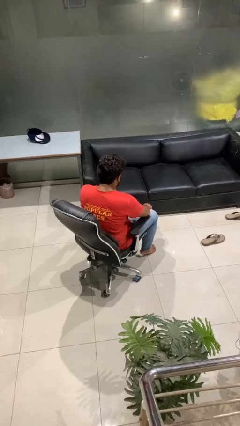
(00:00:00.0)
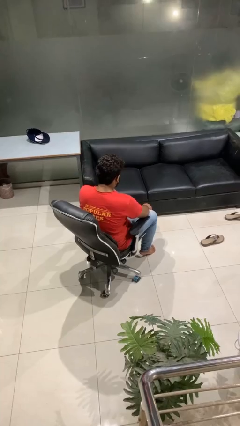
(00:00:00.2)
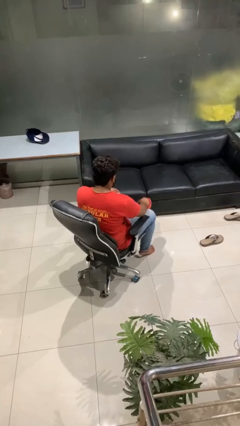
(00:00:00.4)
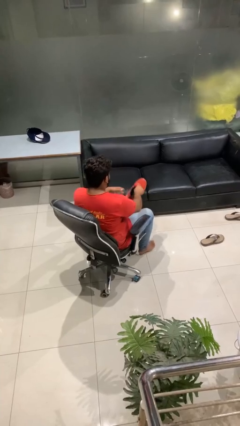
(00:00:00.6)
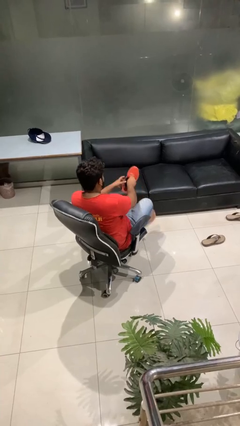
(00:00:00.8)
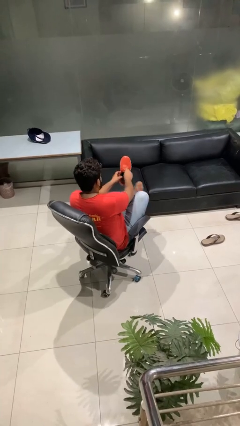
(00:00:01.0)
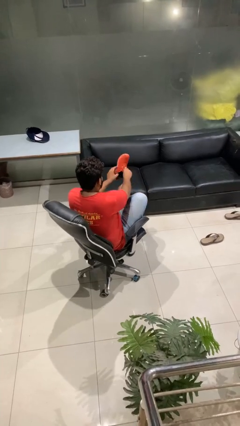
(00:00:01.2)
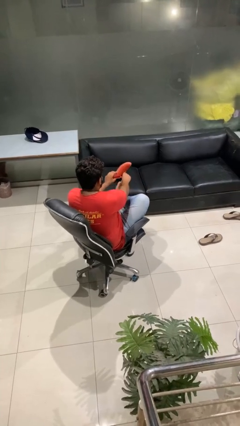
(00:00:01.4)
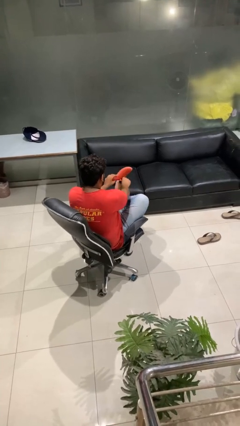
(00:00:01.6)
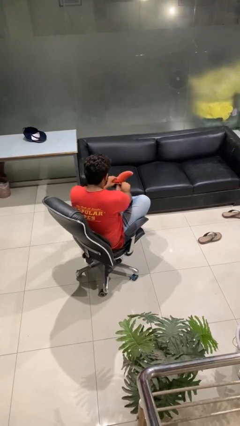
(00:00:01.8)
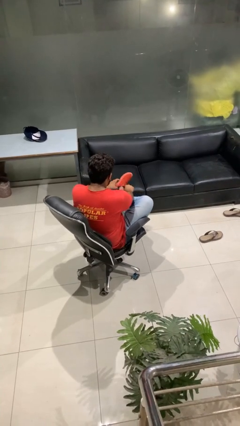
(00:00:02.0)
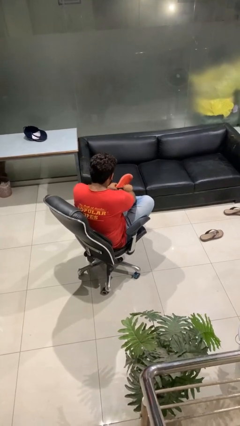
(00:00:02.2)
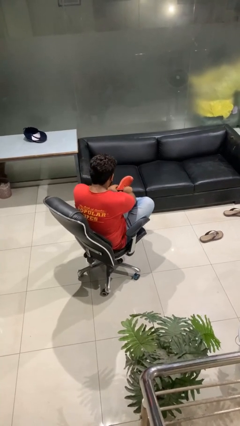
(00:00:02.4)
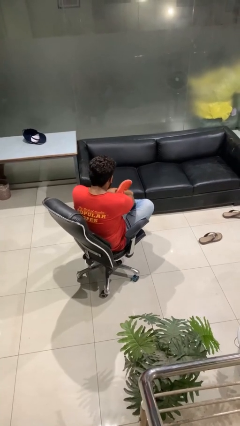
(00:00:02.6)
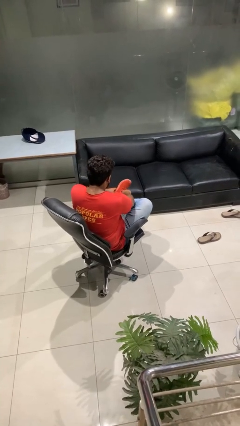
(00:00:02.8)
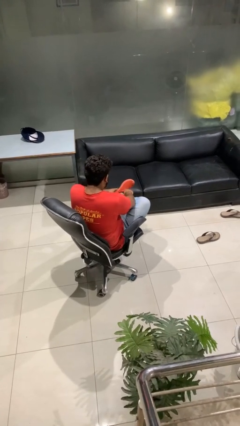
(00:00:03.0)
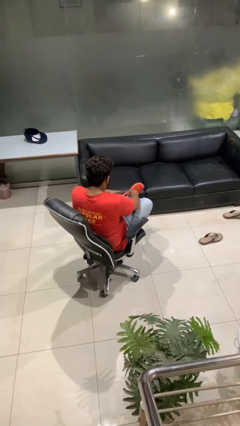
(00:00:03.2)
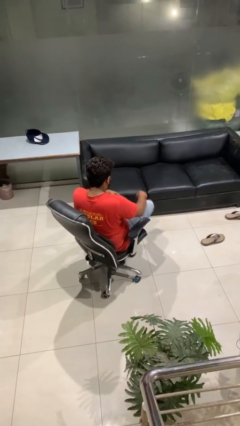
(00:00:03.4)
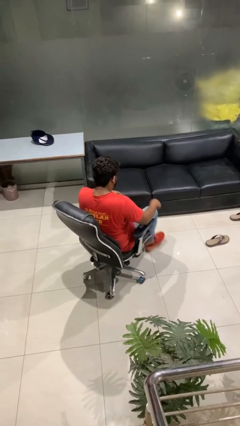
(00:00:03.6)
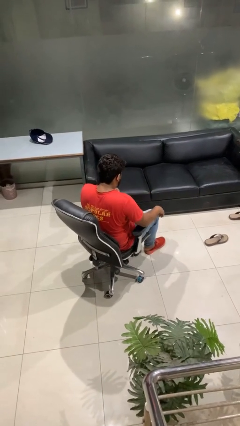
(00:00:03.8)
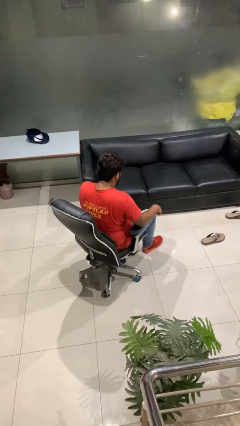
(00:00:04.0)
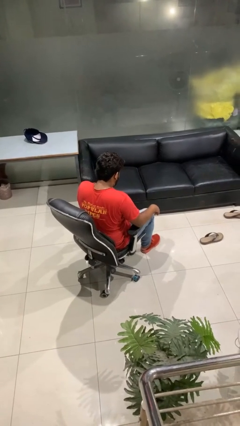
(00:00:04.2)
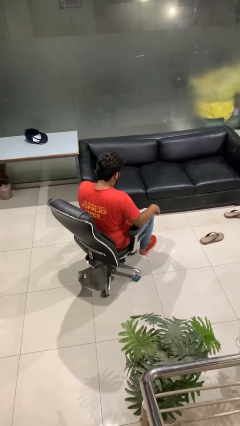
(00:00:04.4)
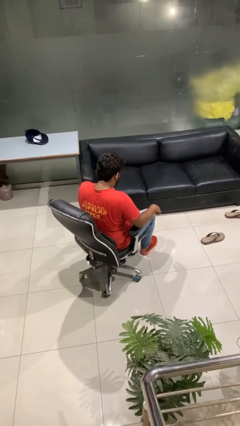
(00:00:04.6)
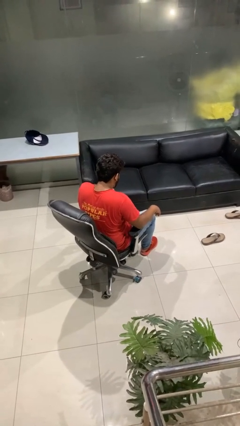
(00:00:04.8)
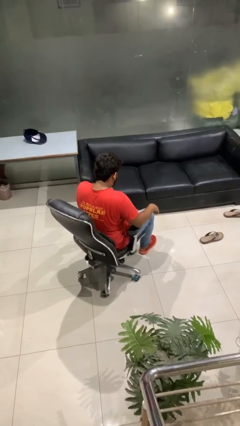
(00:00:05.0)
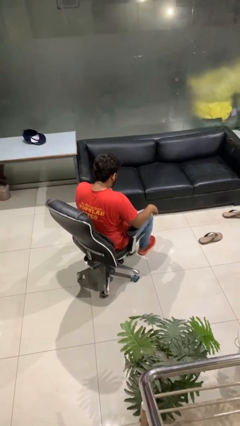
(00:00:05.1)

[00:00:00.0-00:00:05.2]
person puts on shoes

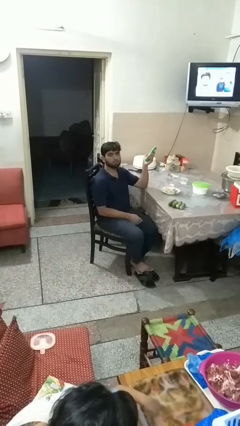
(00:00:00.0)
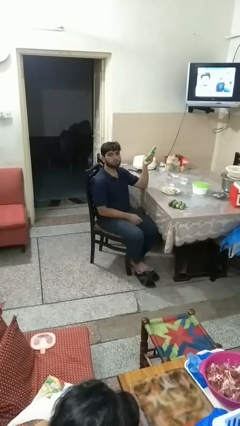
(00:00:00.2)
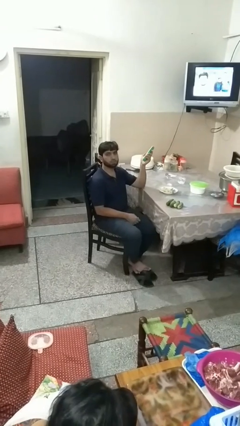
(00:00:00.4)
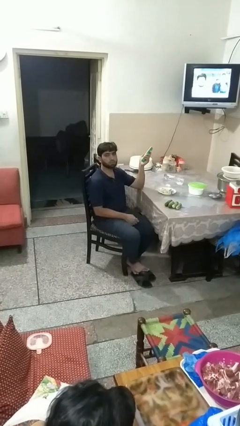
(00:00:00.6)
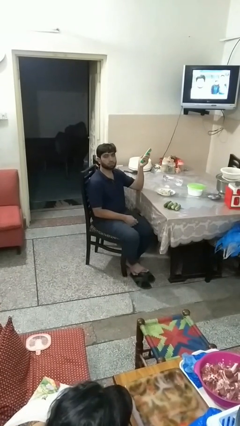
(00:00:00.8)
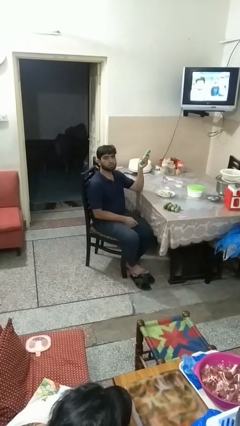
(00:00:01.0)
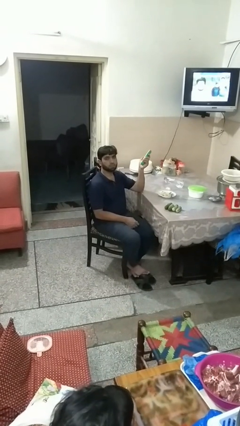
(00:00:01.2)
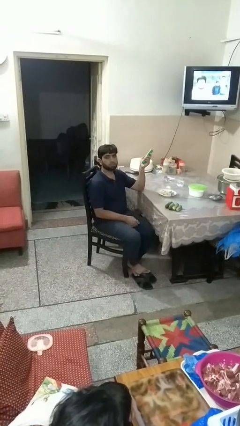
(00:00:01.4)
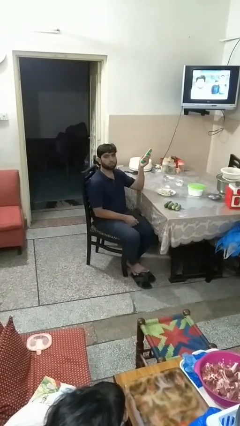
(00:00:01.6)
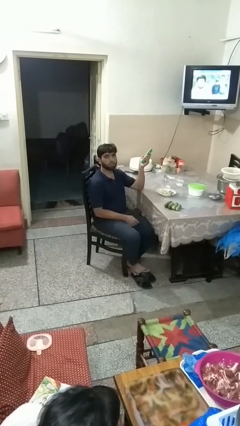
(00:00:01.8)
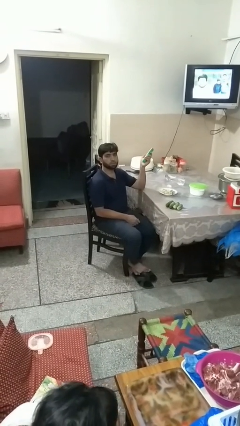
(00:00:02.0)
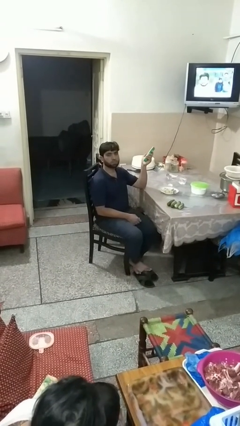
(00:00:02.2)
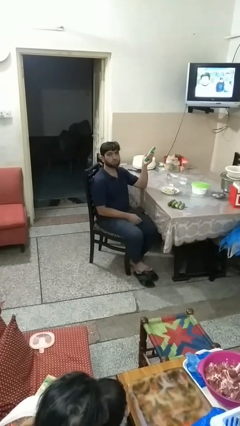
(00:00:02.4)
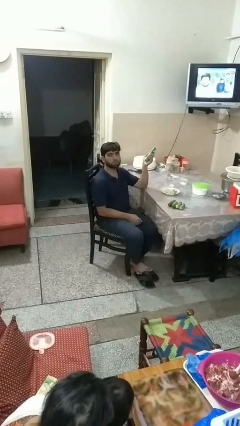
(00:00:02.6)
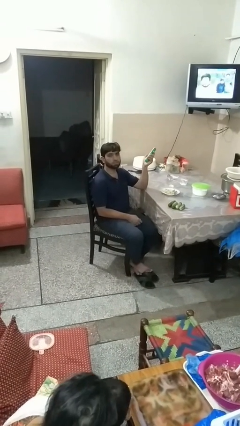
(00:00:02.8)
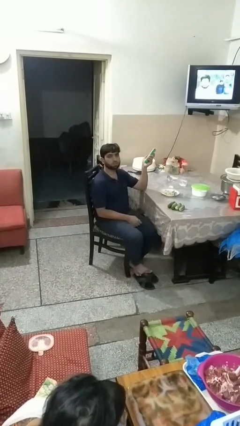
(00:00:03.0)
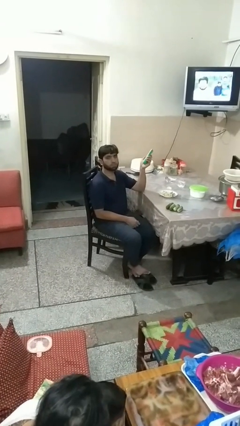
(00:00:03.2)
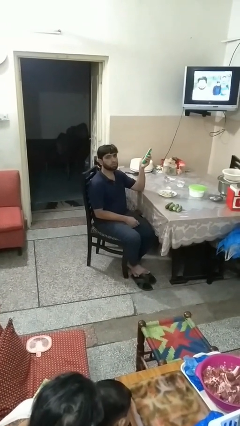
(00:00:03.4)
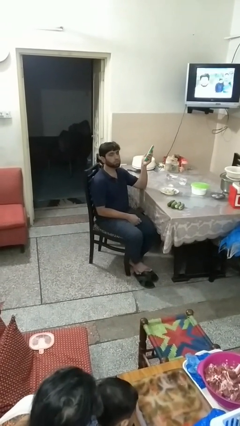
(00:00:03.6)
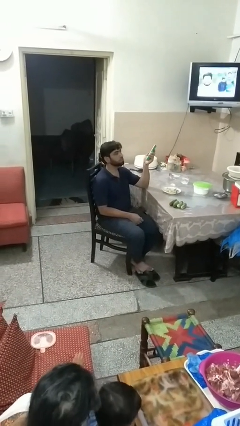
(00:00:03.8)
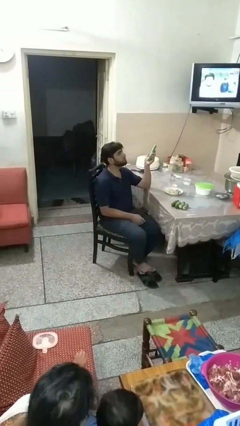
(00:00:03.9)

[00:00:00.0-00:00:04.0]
person uses television remote

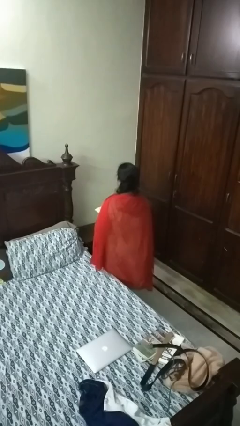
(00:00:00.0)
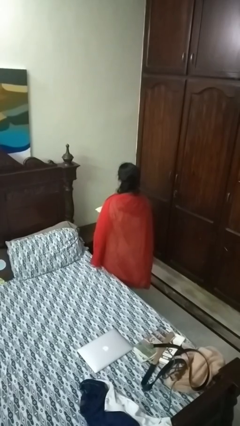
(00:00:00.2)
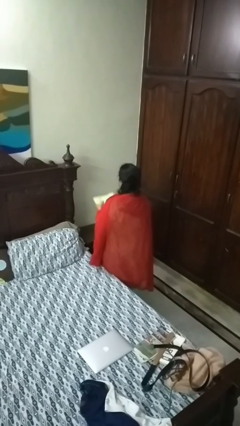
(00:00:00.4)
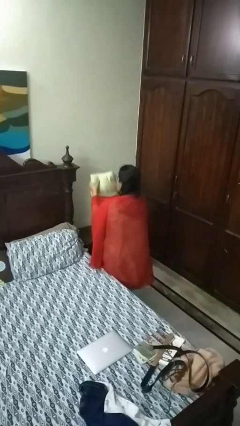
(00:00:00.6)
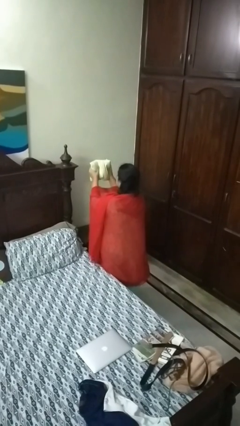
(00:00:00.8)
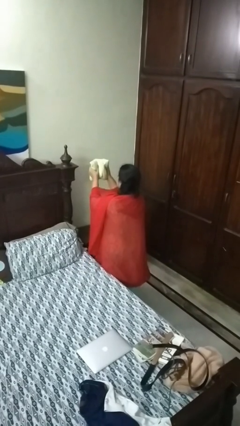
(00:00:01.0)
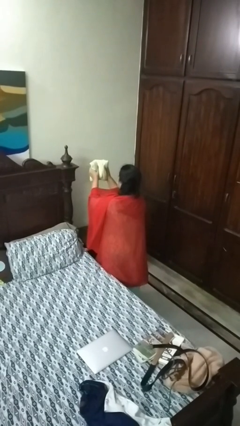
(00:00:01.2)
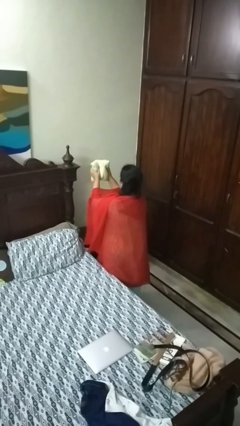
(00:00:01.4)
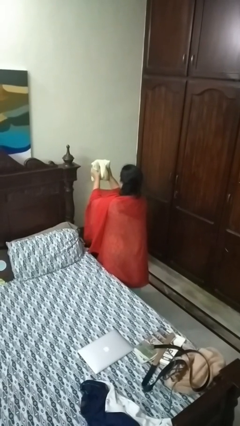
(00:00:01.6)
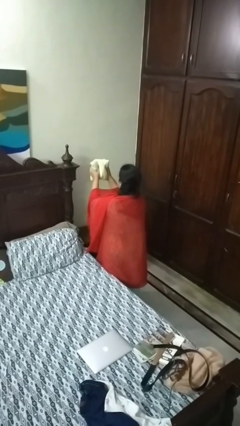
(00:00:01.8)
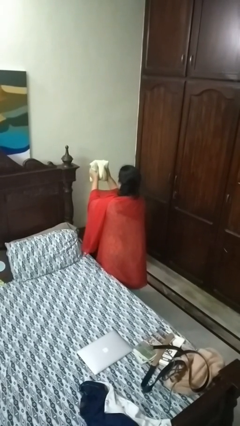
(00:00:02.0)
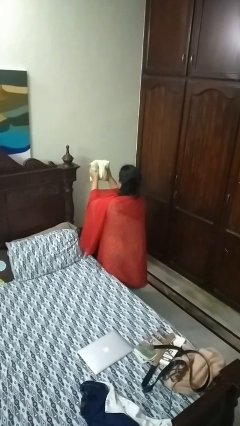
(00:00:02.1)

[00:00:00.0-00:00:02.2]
person squeezes object

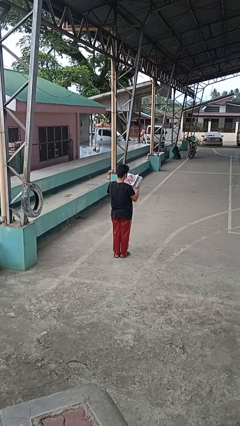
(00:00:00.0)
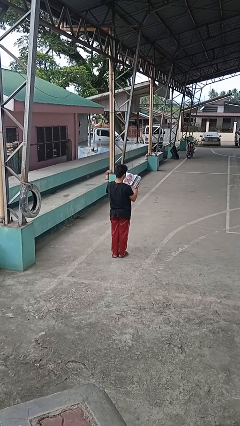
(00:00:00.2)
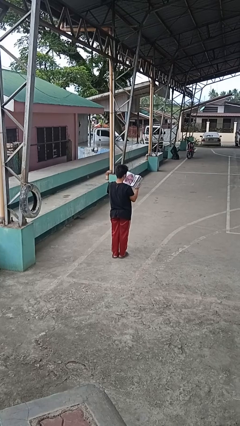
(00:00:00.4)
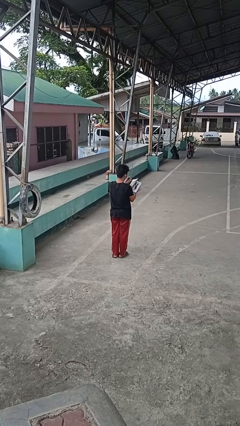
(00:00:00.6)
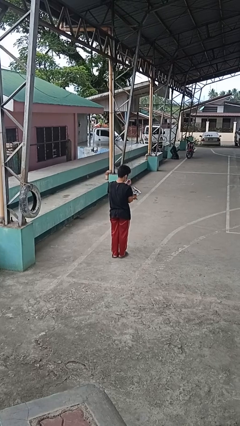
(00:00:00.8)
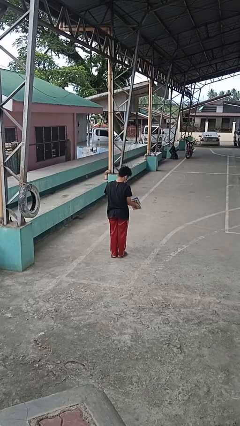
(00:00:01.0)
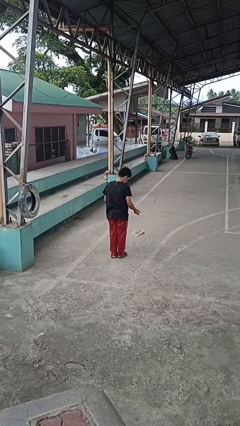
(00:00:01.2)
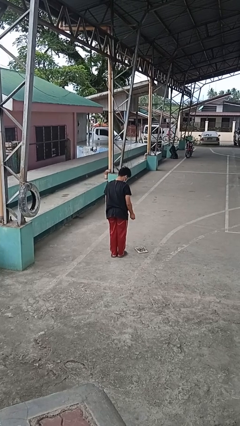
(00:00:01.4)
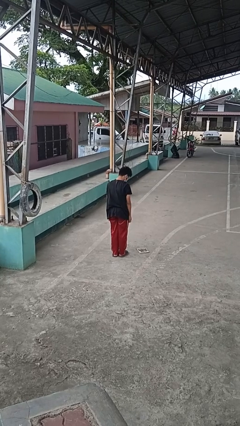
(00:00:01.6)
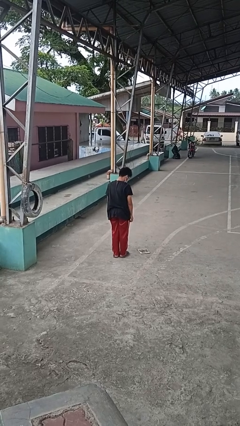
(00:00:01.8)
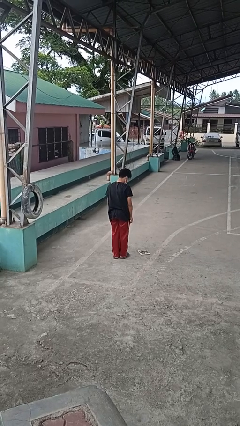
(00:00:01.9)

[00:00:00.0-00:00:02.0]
person drops object

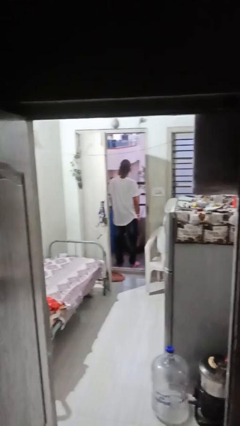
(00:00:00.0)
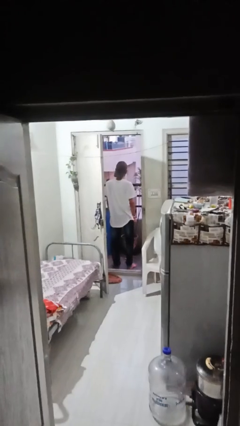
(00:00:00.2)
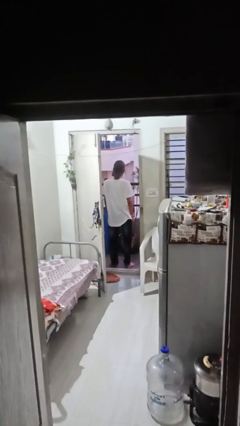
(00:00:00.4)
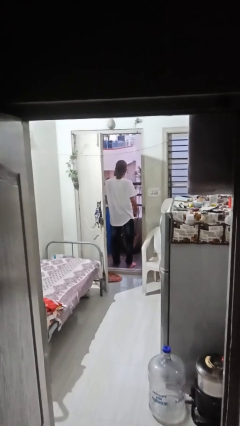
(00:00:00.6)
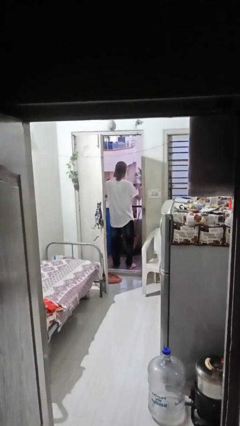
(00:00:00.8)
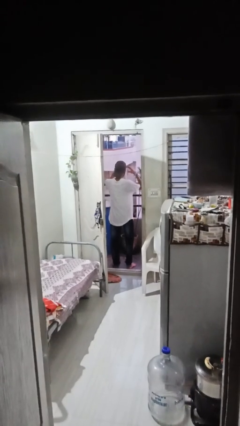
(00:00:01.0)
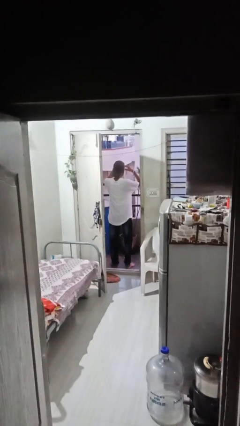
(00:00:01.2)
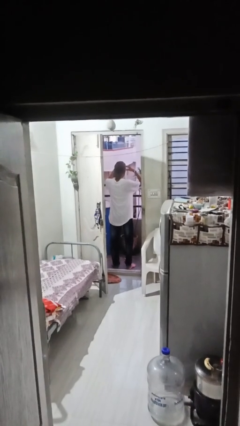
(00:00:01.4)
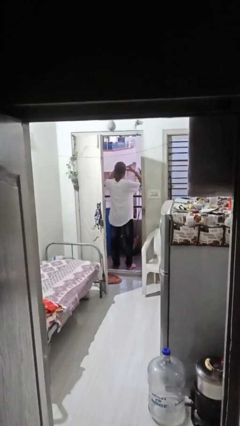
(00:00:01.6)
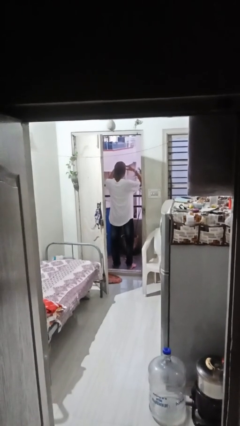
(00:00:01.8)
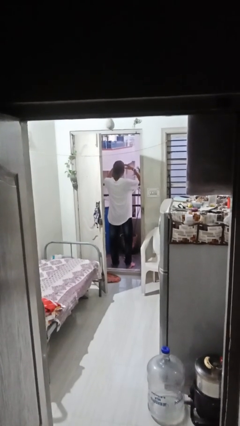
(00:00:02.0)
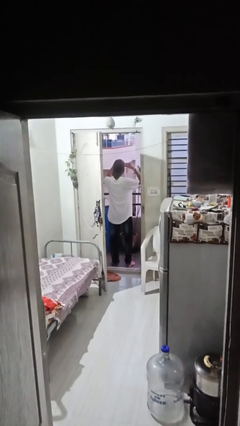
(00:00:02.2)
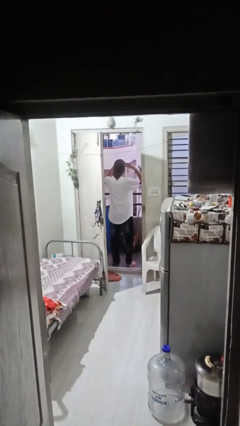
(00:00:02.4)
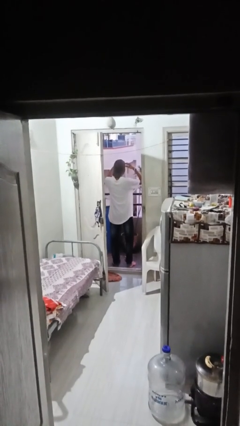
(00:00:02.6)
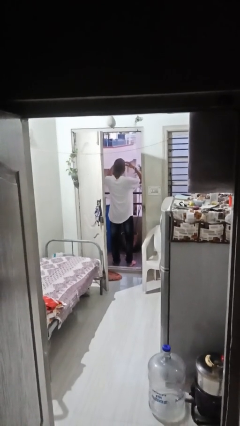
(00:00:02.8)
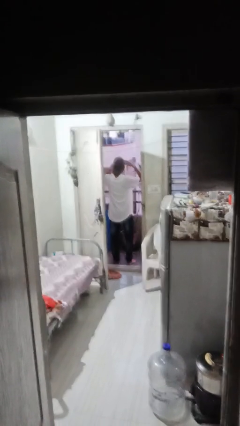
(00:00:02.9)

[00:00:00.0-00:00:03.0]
person shades eyes

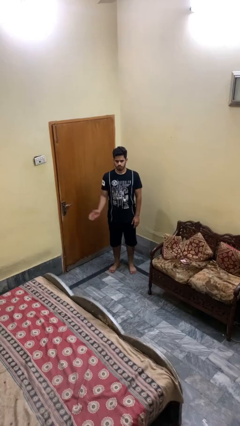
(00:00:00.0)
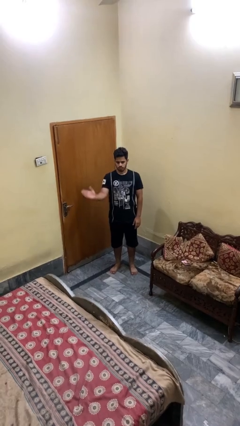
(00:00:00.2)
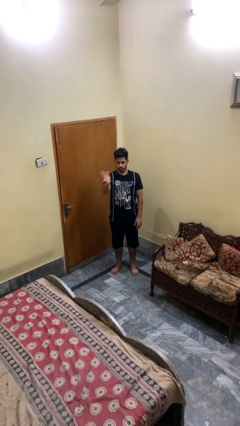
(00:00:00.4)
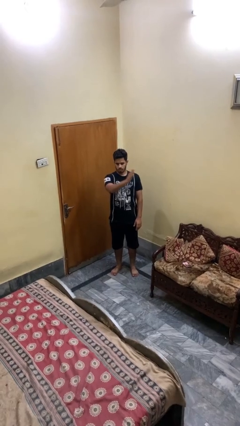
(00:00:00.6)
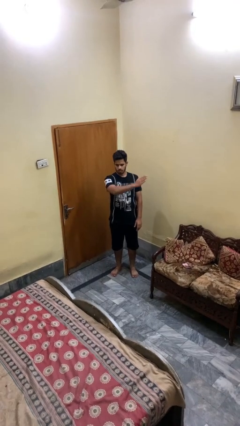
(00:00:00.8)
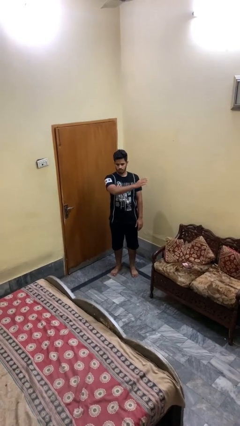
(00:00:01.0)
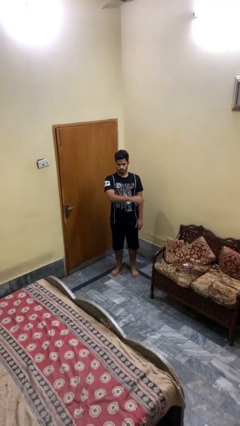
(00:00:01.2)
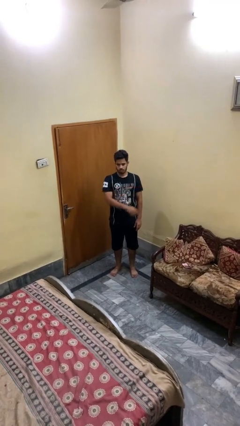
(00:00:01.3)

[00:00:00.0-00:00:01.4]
person gestures swipe left
